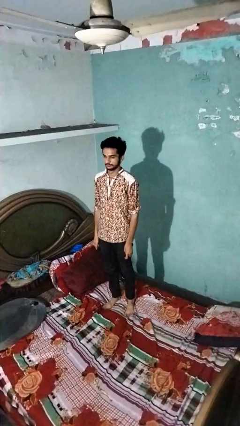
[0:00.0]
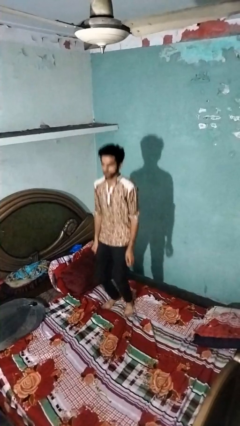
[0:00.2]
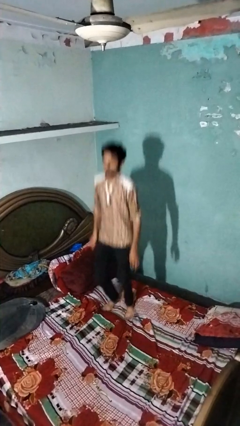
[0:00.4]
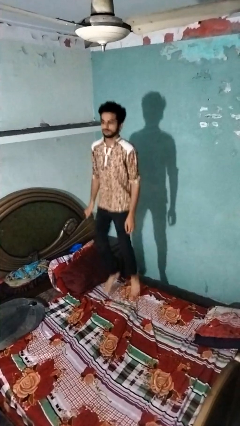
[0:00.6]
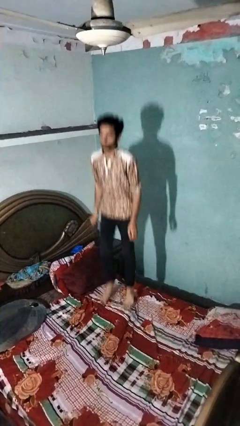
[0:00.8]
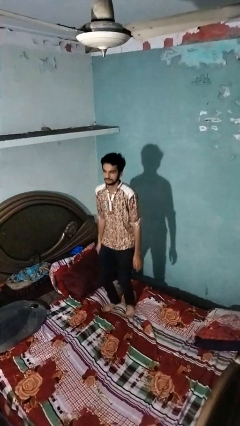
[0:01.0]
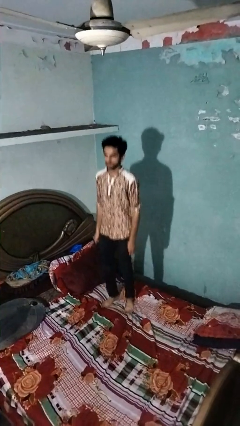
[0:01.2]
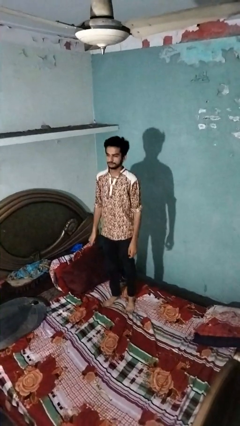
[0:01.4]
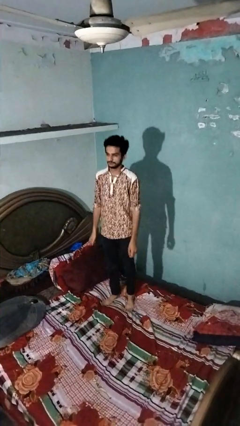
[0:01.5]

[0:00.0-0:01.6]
person jumps on bed

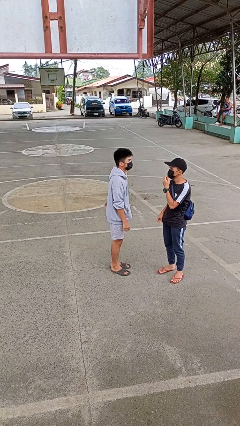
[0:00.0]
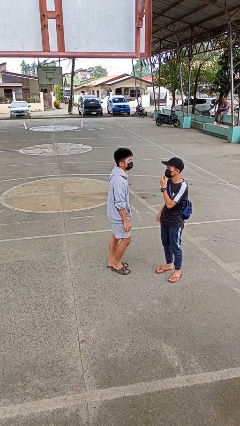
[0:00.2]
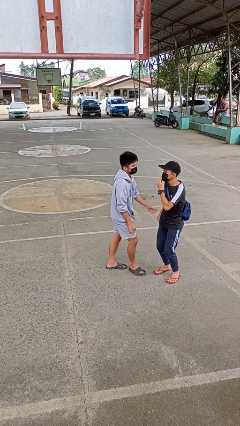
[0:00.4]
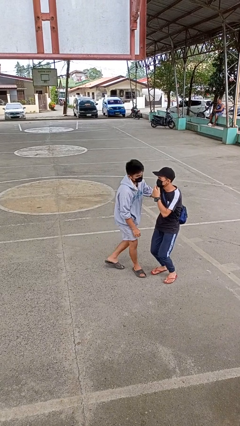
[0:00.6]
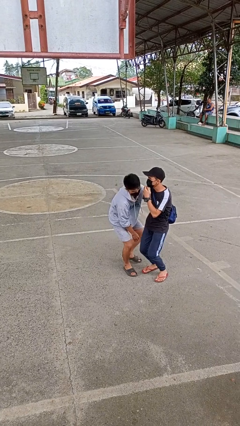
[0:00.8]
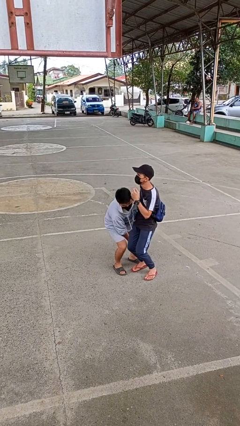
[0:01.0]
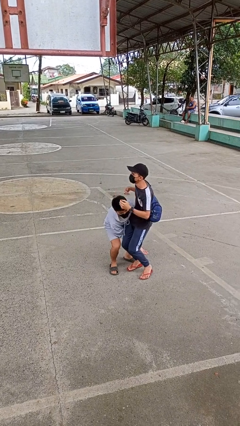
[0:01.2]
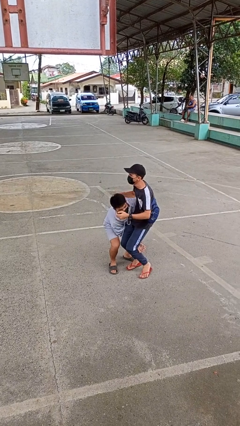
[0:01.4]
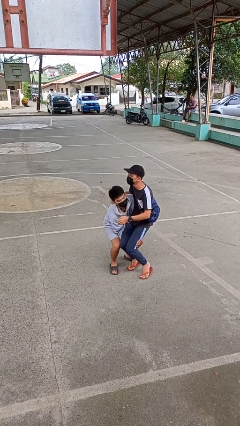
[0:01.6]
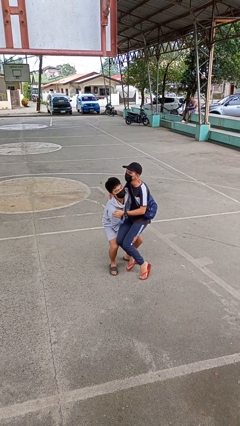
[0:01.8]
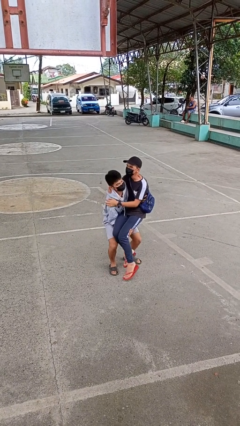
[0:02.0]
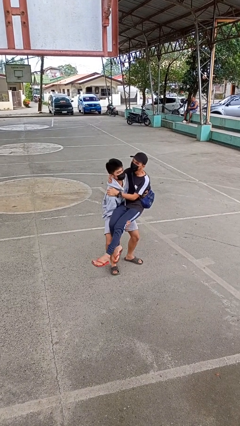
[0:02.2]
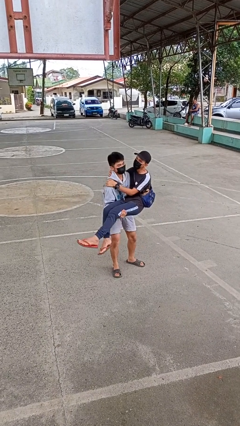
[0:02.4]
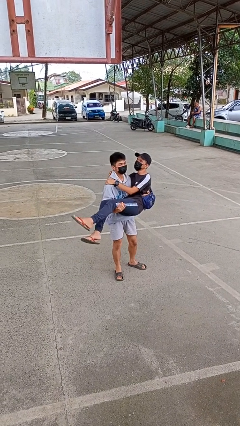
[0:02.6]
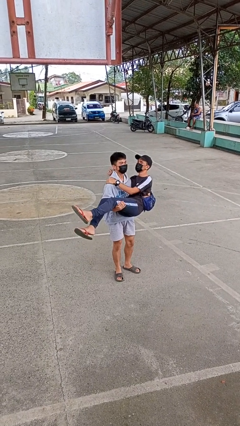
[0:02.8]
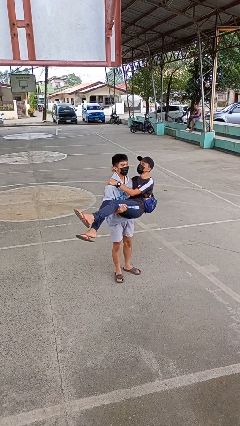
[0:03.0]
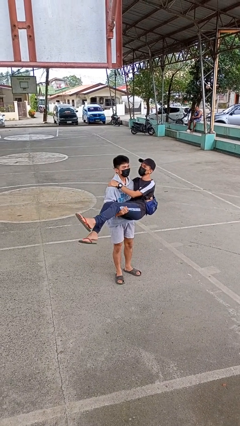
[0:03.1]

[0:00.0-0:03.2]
person picks up person

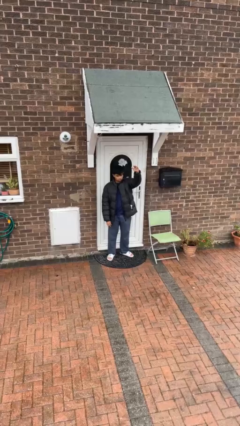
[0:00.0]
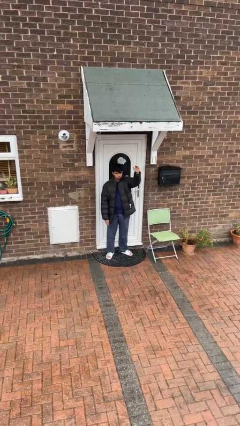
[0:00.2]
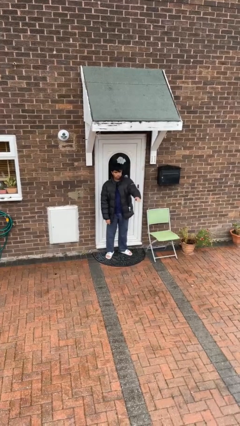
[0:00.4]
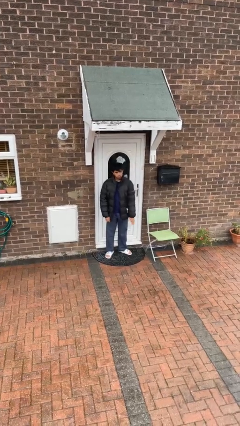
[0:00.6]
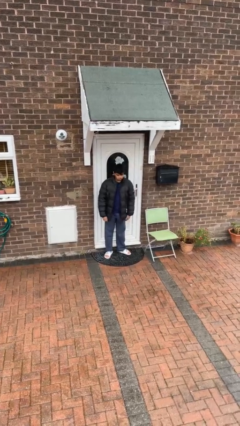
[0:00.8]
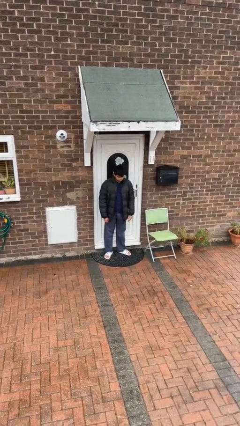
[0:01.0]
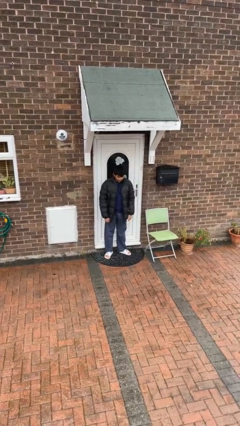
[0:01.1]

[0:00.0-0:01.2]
person gestures swipe down

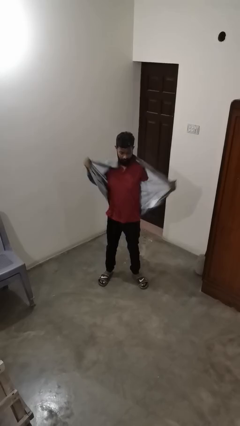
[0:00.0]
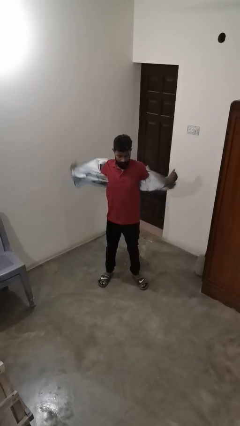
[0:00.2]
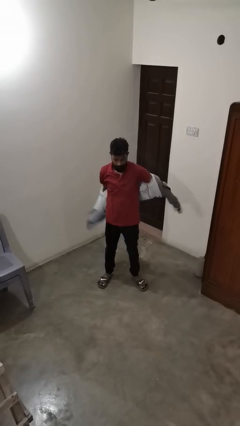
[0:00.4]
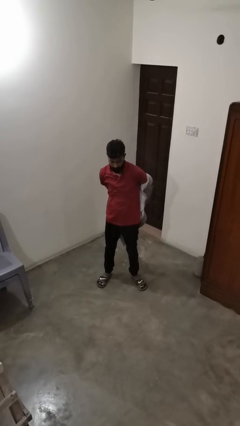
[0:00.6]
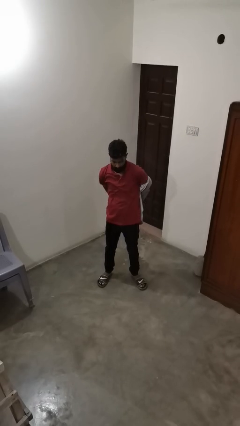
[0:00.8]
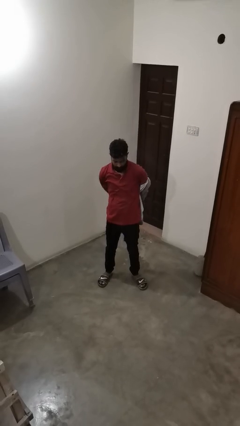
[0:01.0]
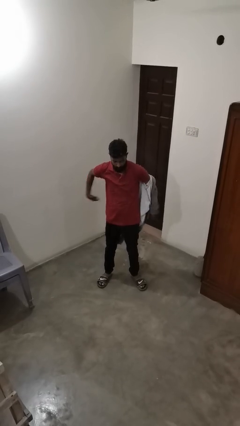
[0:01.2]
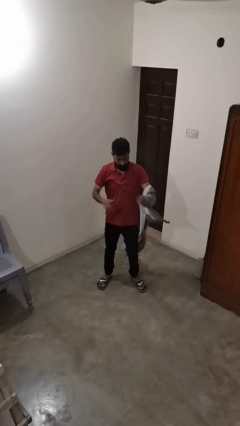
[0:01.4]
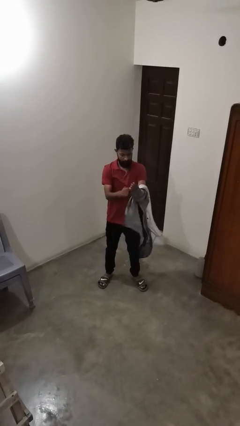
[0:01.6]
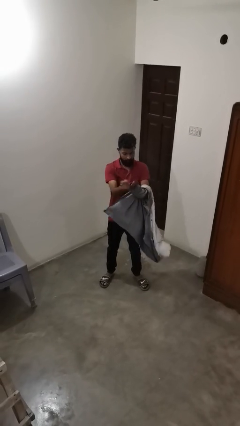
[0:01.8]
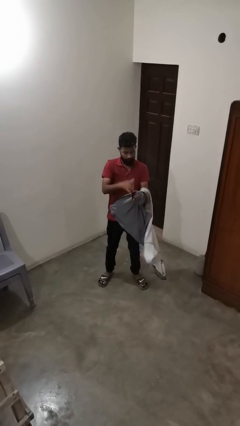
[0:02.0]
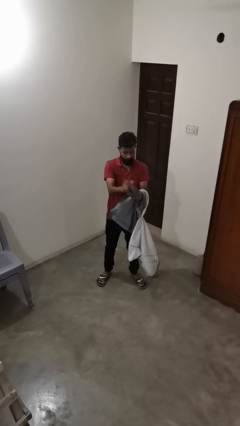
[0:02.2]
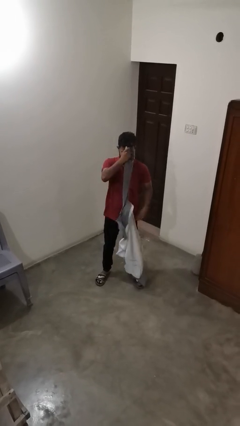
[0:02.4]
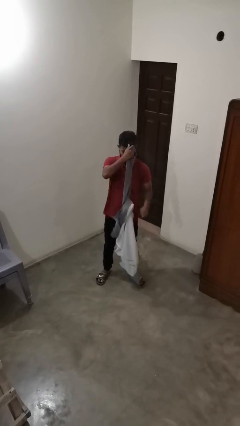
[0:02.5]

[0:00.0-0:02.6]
person takes off jacket

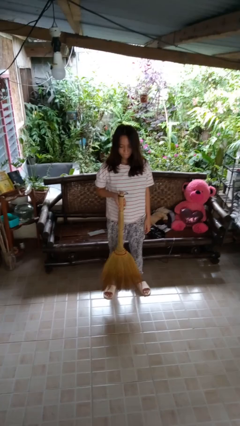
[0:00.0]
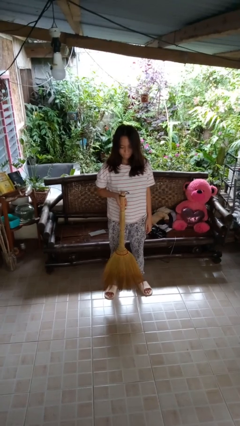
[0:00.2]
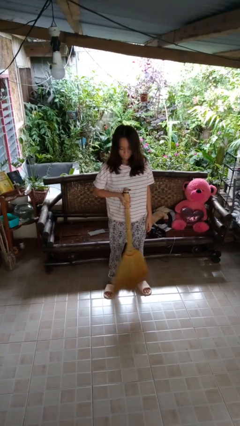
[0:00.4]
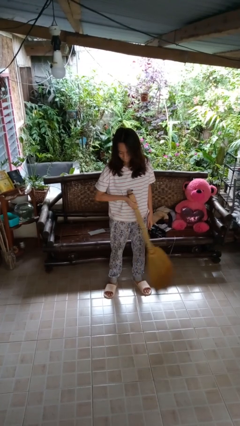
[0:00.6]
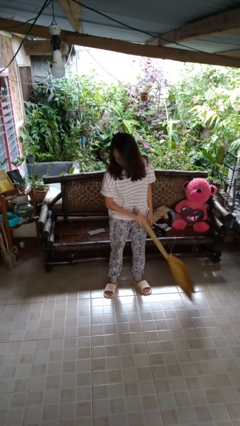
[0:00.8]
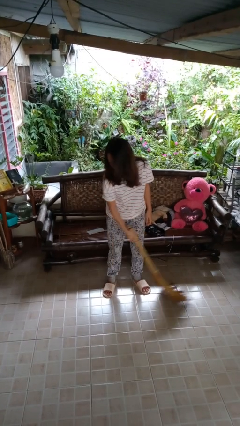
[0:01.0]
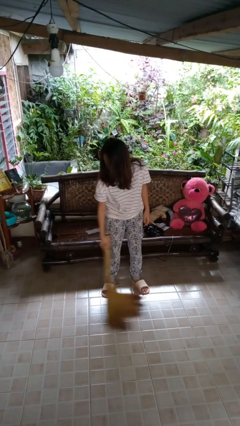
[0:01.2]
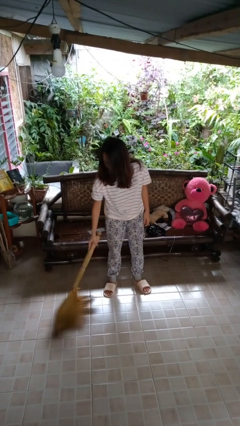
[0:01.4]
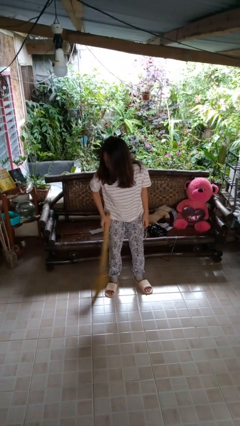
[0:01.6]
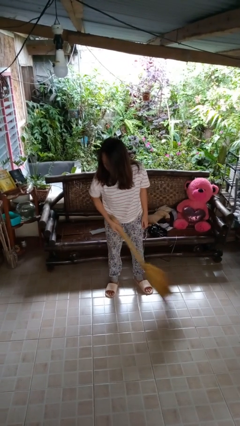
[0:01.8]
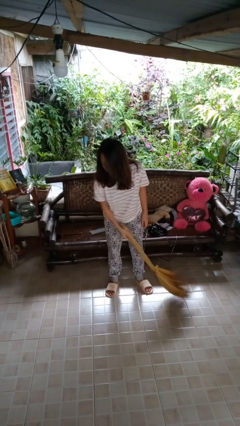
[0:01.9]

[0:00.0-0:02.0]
person sweeps floor

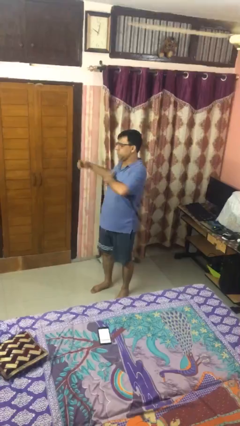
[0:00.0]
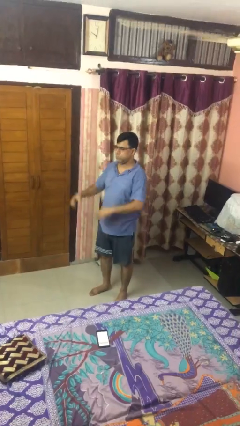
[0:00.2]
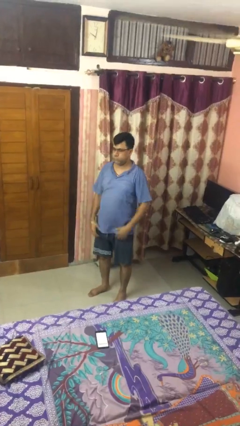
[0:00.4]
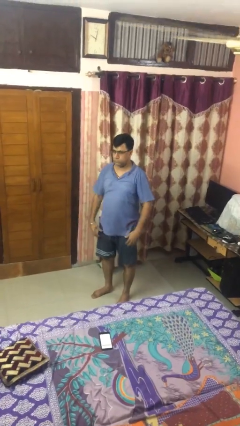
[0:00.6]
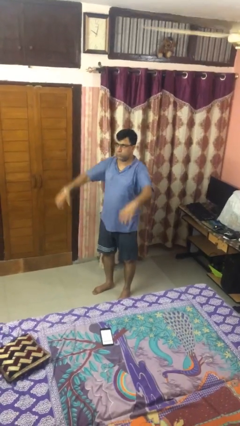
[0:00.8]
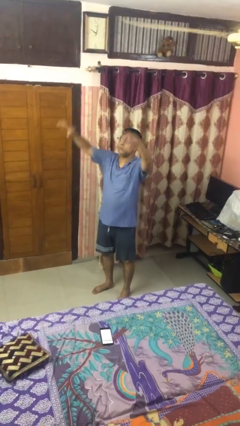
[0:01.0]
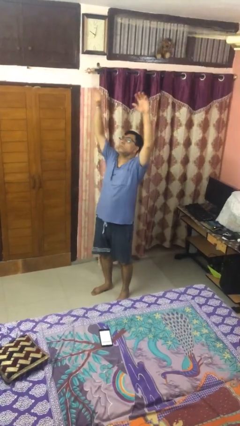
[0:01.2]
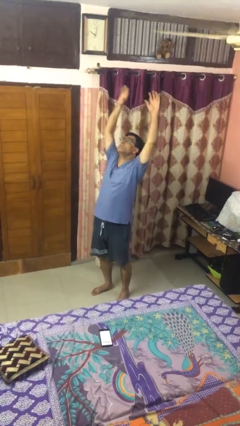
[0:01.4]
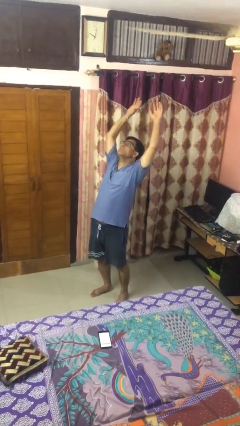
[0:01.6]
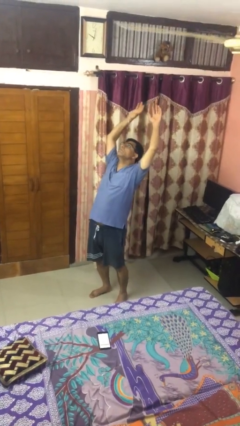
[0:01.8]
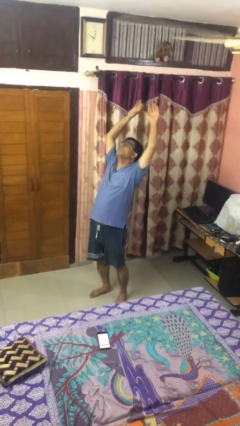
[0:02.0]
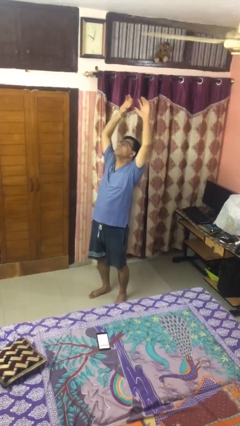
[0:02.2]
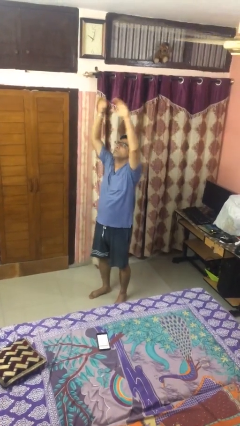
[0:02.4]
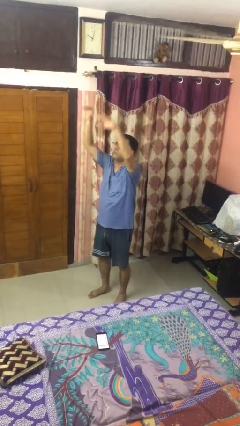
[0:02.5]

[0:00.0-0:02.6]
person stretches arms over head

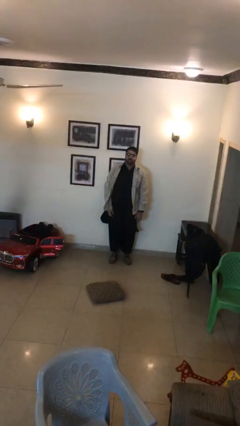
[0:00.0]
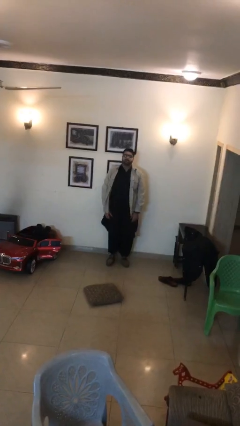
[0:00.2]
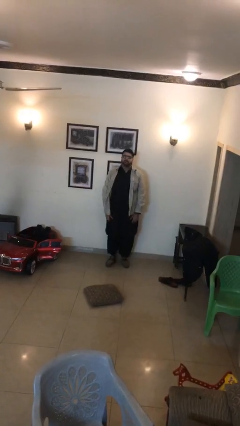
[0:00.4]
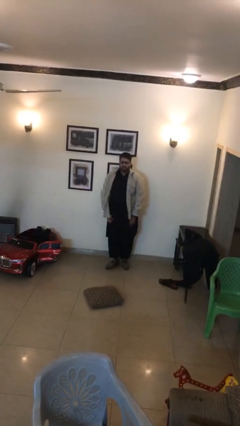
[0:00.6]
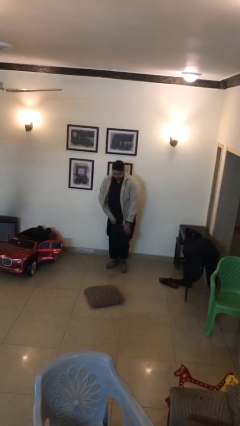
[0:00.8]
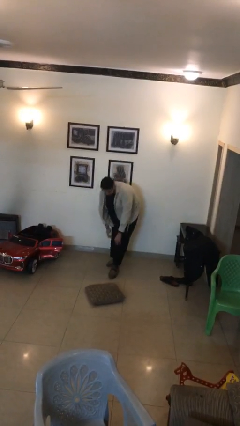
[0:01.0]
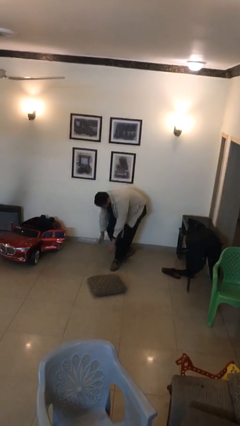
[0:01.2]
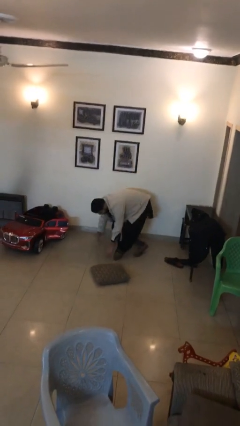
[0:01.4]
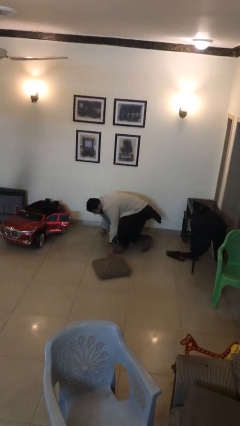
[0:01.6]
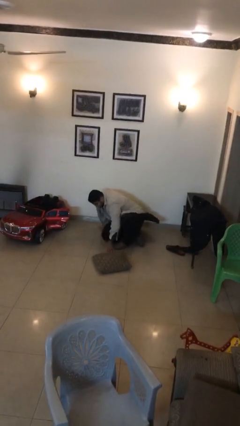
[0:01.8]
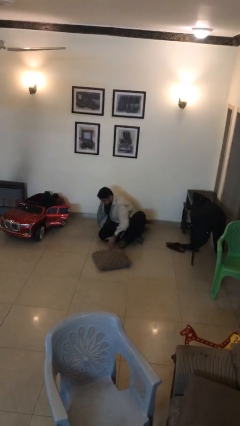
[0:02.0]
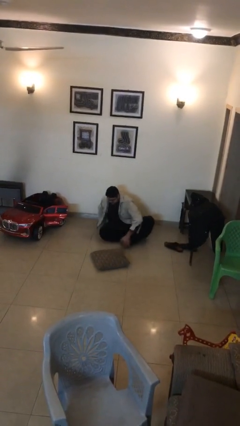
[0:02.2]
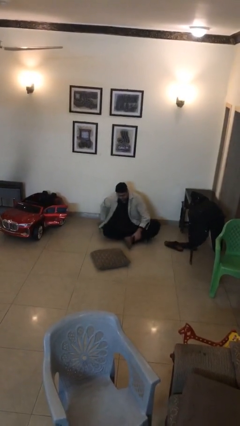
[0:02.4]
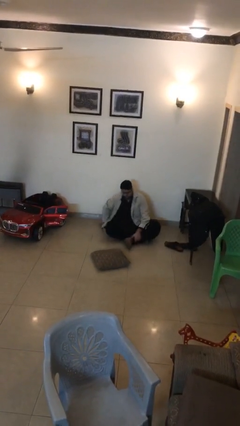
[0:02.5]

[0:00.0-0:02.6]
person sits down

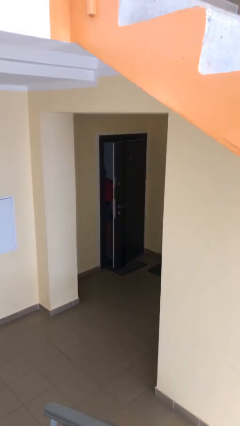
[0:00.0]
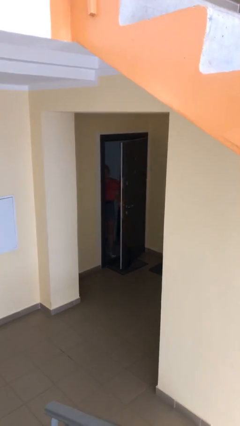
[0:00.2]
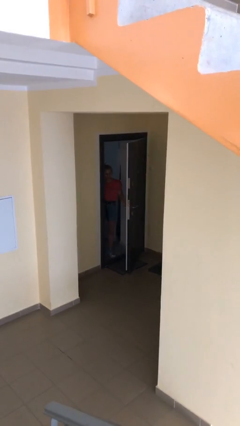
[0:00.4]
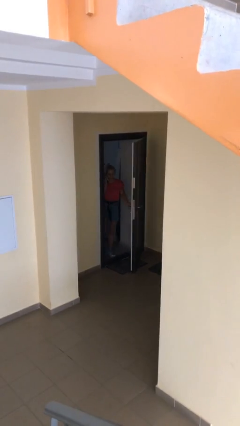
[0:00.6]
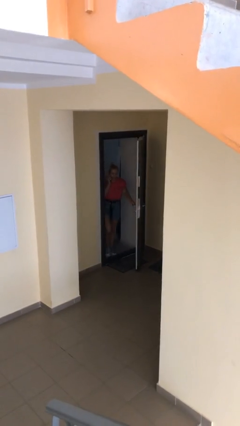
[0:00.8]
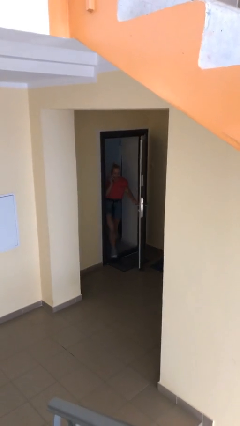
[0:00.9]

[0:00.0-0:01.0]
person opens facility door

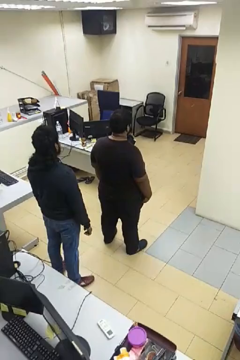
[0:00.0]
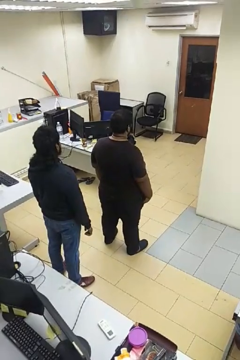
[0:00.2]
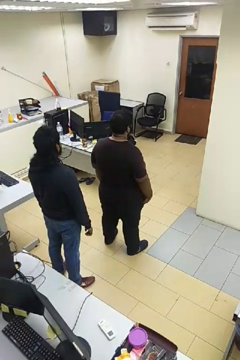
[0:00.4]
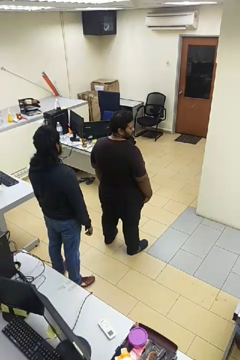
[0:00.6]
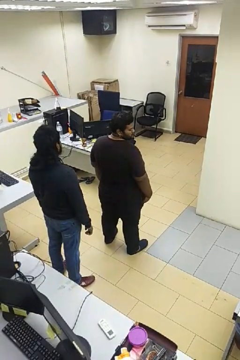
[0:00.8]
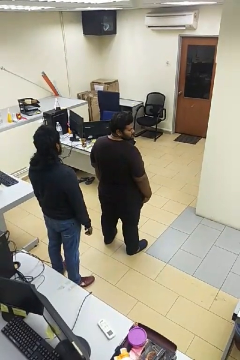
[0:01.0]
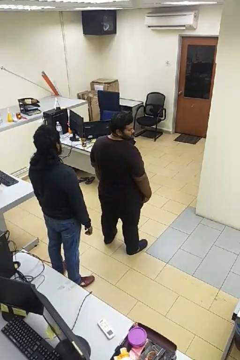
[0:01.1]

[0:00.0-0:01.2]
person looks over shoulder
